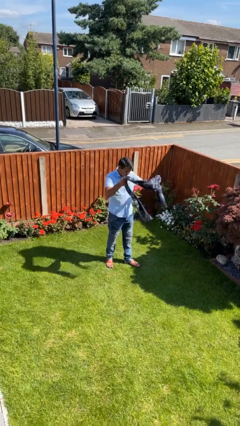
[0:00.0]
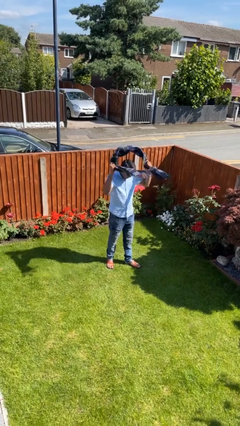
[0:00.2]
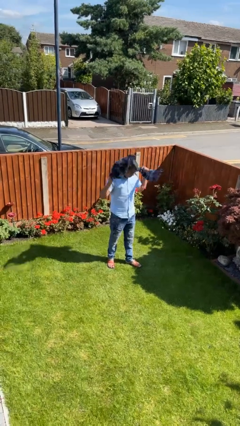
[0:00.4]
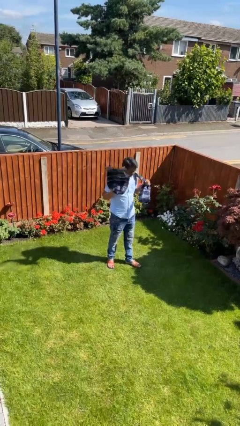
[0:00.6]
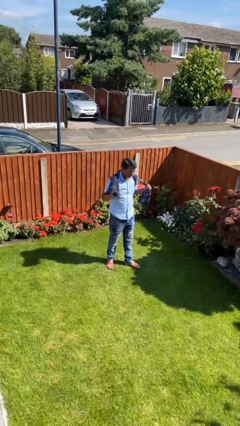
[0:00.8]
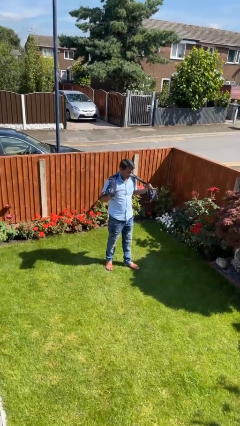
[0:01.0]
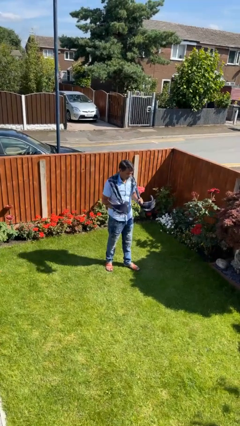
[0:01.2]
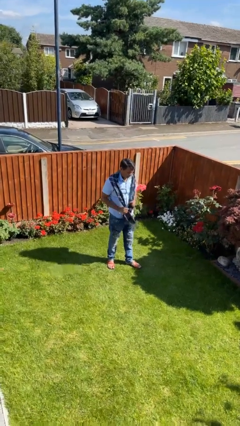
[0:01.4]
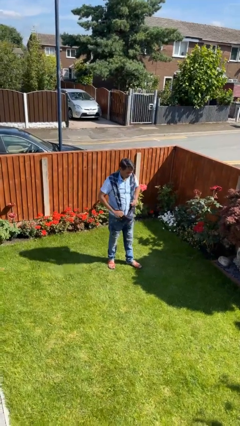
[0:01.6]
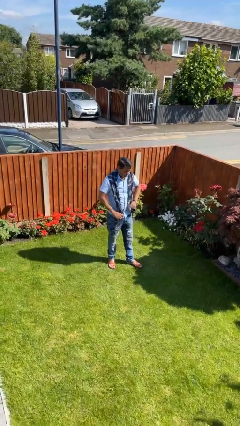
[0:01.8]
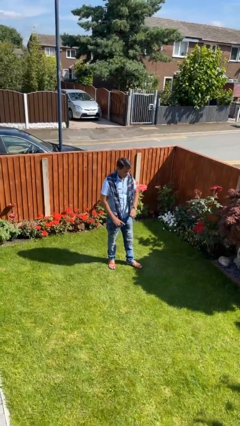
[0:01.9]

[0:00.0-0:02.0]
person puts on scarf

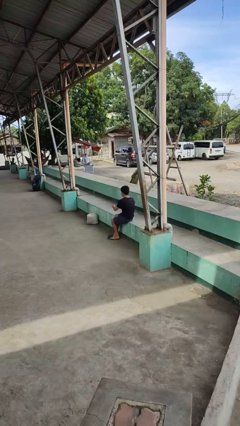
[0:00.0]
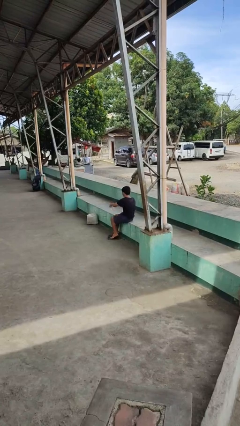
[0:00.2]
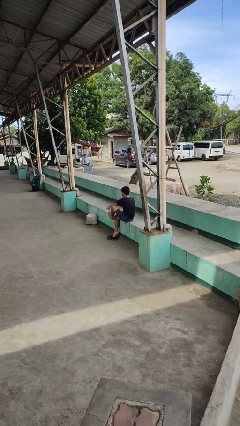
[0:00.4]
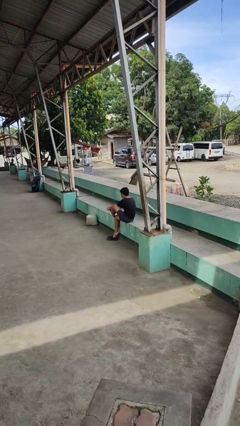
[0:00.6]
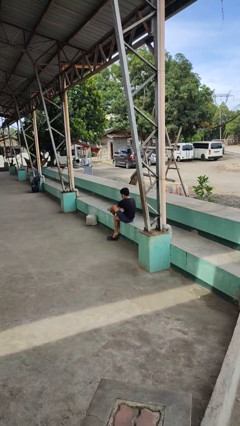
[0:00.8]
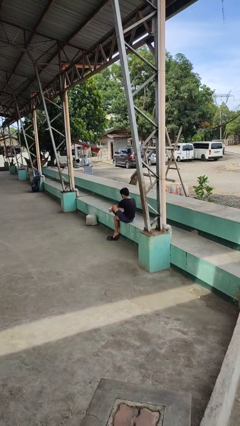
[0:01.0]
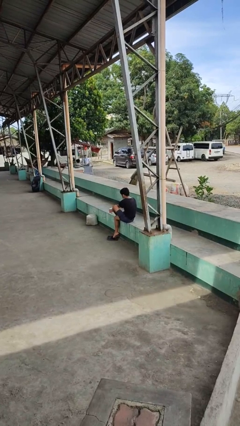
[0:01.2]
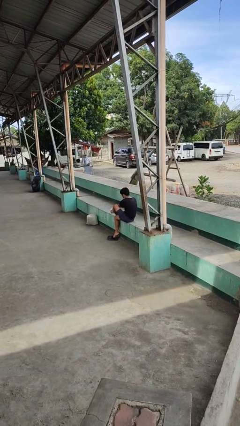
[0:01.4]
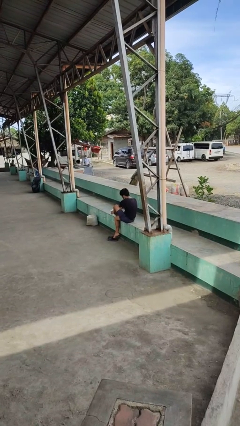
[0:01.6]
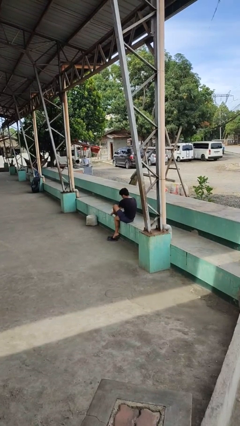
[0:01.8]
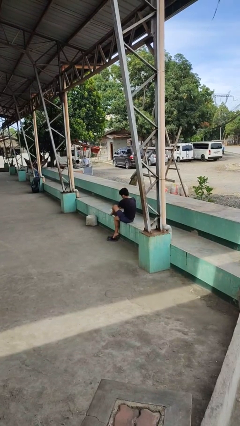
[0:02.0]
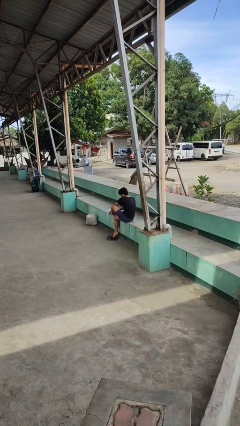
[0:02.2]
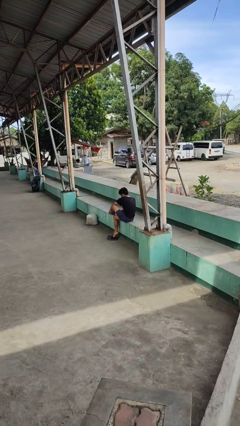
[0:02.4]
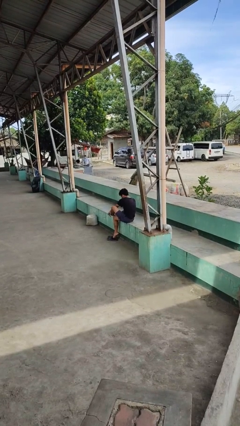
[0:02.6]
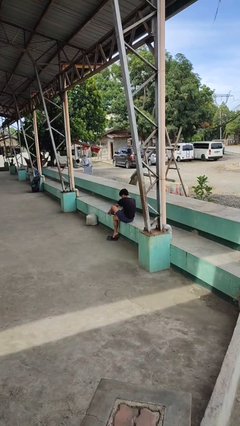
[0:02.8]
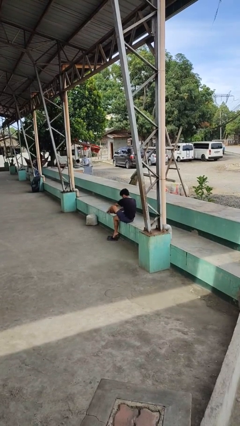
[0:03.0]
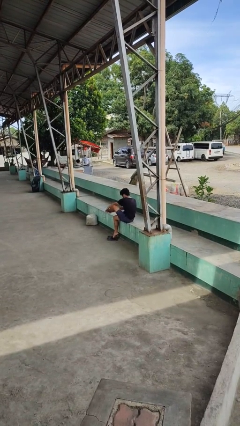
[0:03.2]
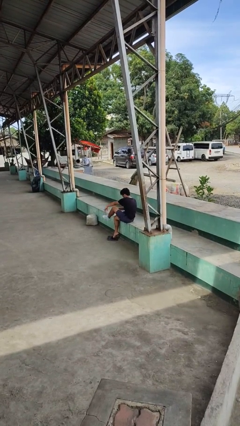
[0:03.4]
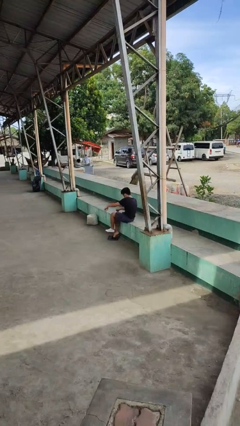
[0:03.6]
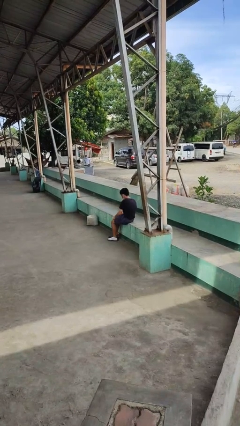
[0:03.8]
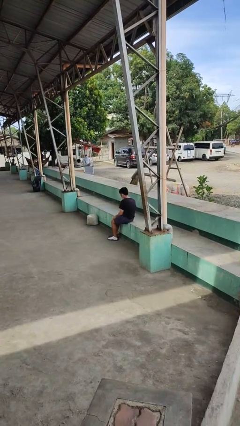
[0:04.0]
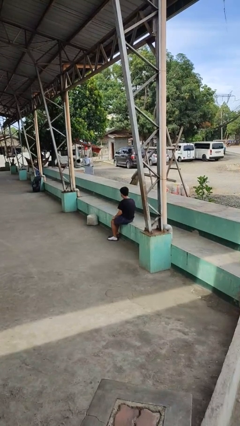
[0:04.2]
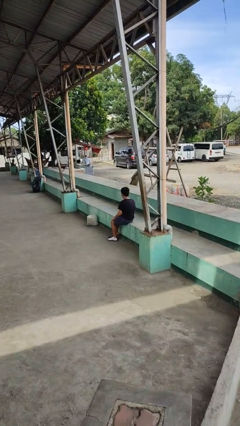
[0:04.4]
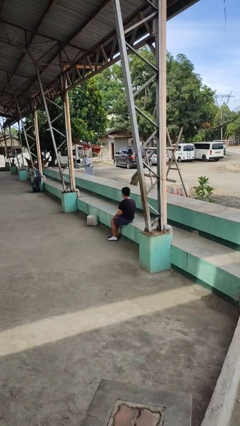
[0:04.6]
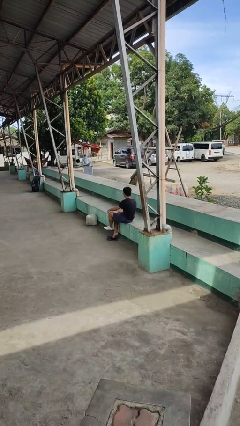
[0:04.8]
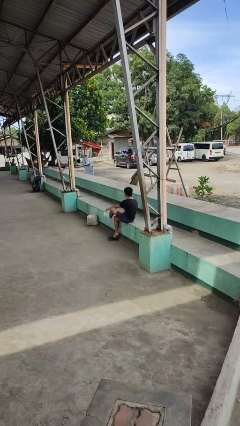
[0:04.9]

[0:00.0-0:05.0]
person puts on socks

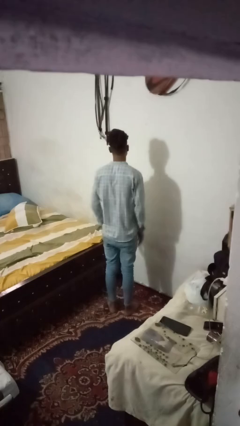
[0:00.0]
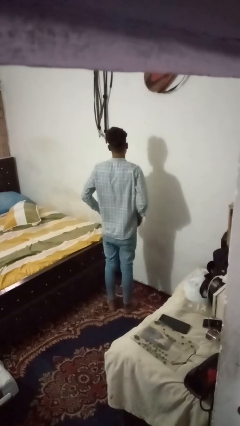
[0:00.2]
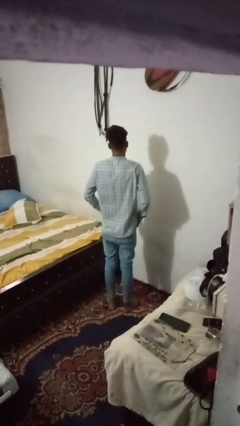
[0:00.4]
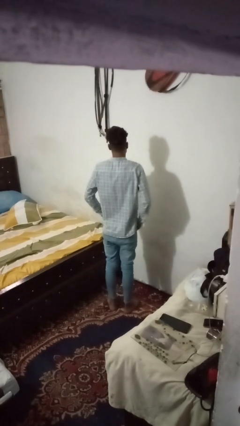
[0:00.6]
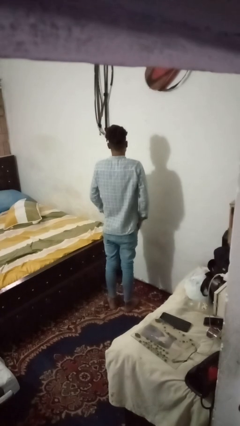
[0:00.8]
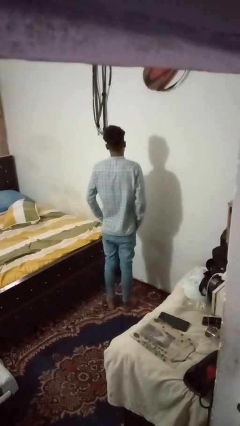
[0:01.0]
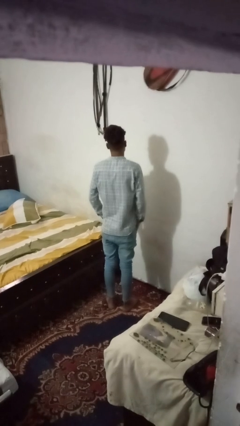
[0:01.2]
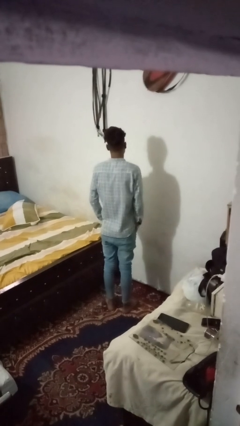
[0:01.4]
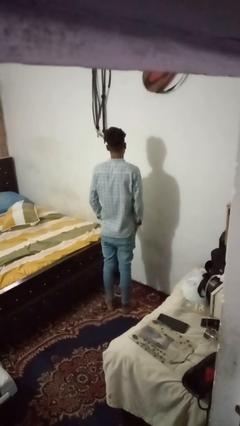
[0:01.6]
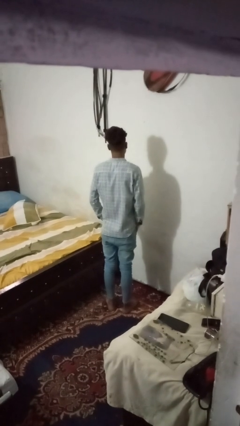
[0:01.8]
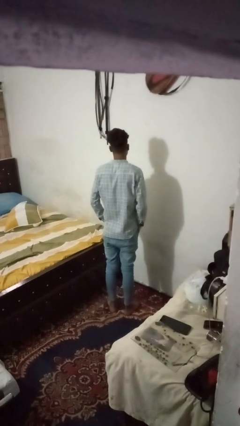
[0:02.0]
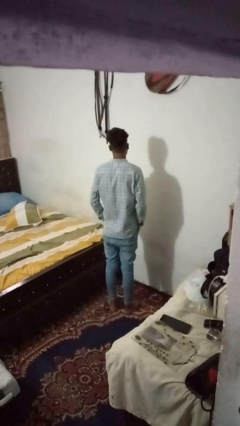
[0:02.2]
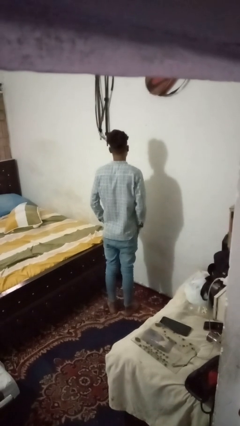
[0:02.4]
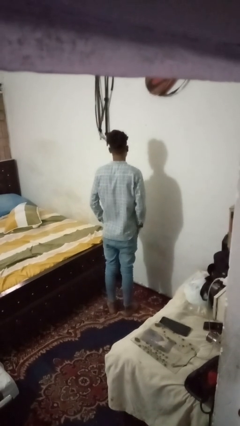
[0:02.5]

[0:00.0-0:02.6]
person puts hands in back pockets

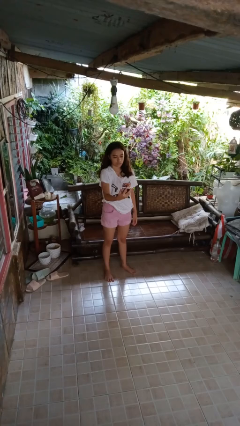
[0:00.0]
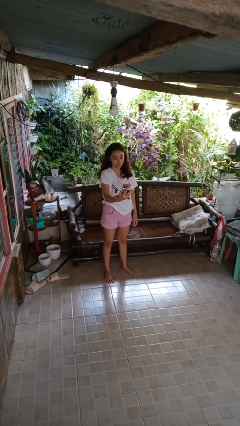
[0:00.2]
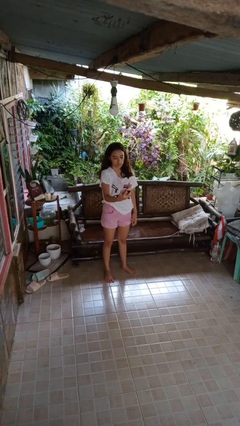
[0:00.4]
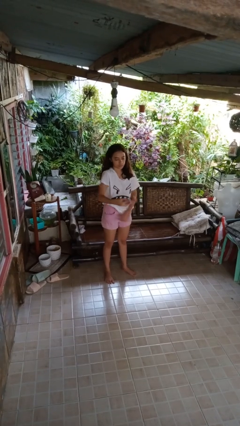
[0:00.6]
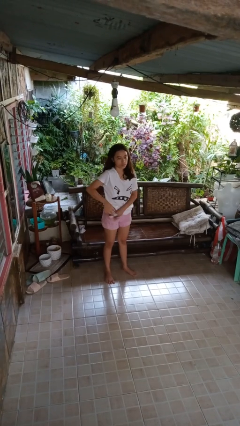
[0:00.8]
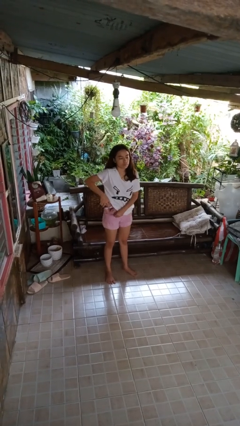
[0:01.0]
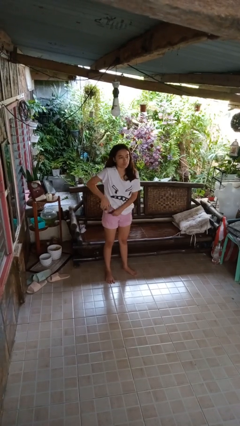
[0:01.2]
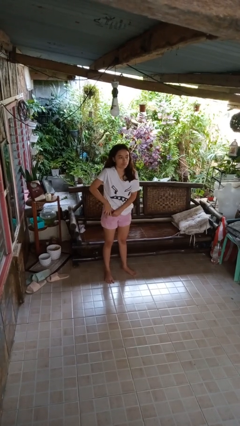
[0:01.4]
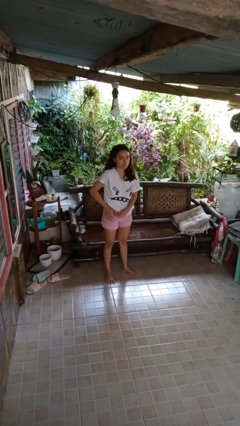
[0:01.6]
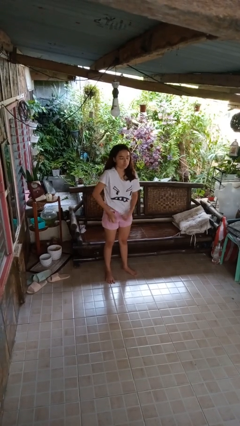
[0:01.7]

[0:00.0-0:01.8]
person puts phone into pocket

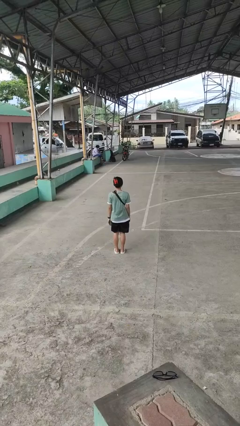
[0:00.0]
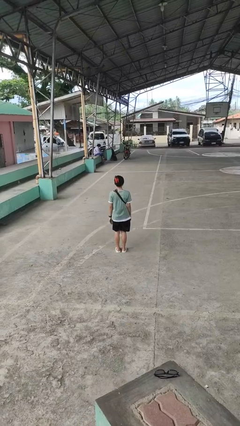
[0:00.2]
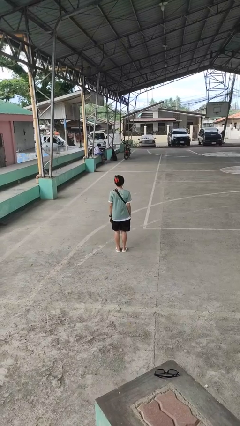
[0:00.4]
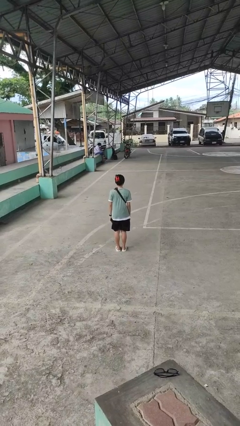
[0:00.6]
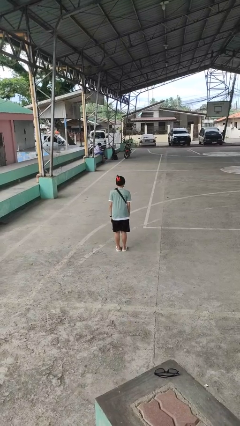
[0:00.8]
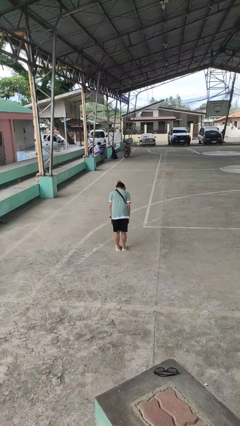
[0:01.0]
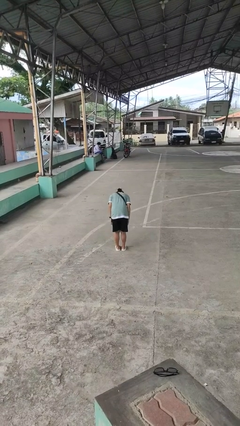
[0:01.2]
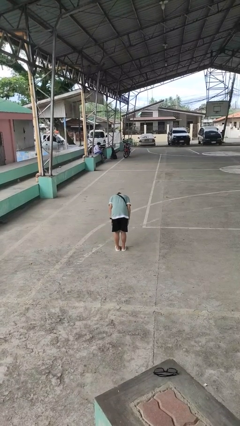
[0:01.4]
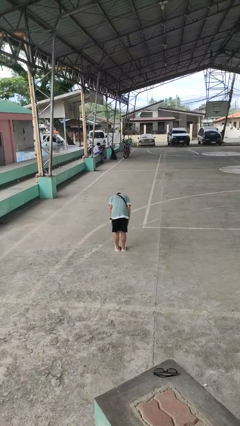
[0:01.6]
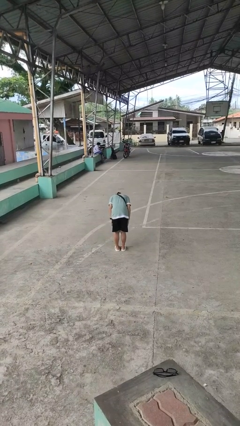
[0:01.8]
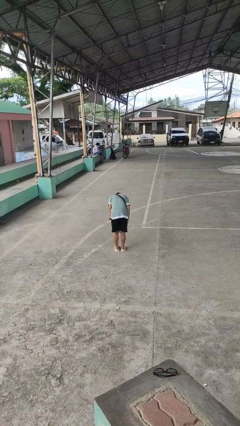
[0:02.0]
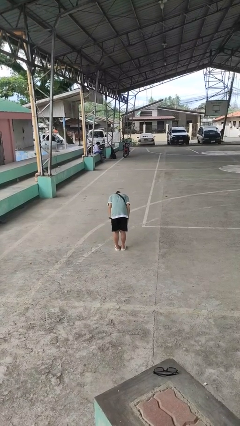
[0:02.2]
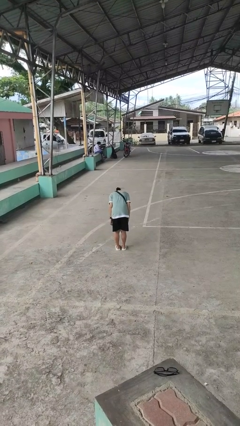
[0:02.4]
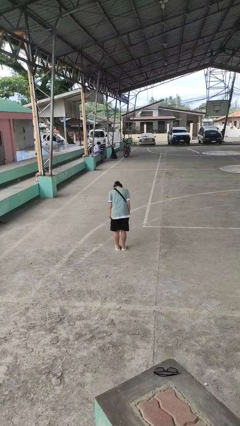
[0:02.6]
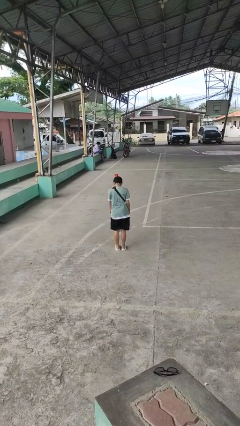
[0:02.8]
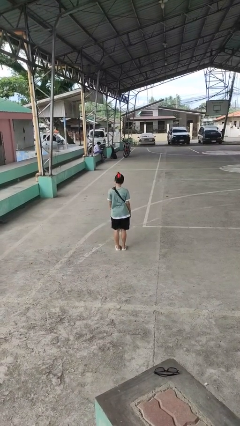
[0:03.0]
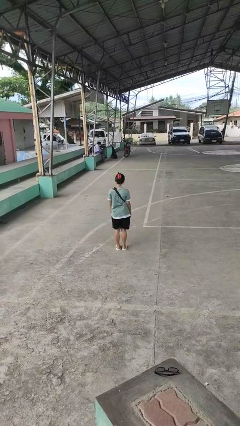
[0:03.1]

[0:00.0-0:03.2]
person bows

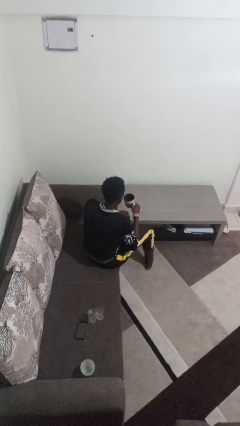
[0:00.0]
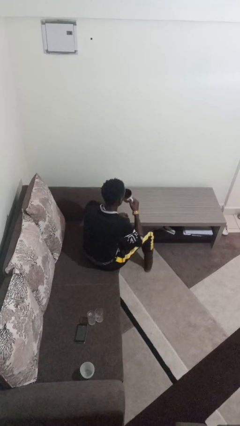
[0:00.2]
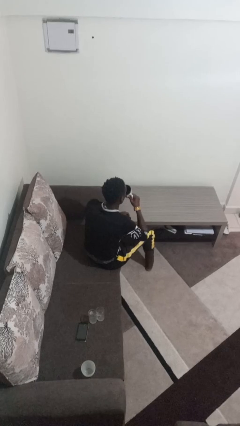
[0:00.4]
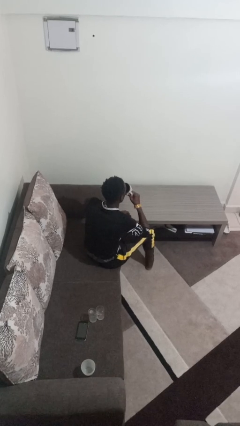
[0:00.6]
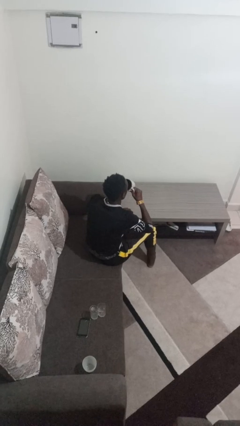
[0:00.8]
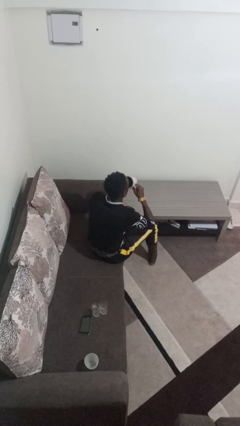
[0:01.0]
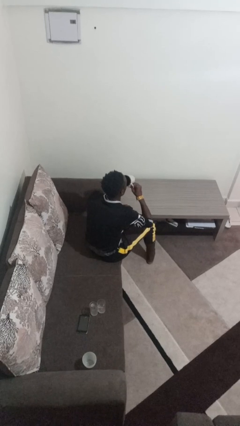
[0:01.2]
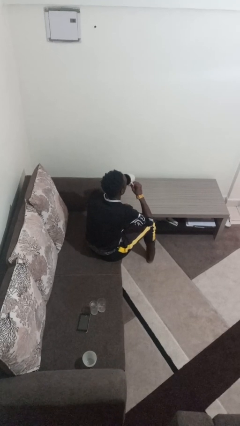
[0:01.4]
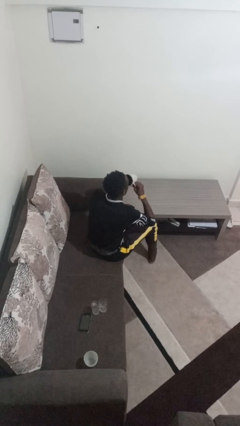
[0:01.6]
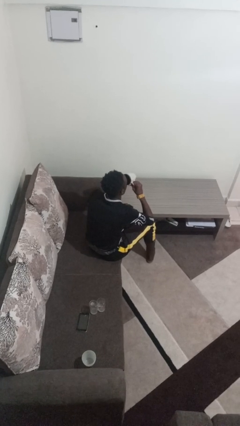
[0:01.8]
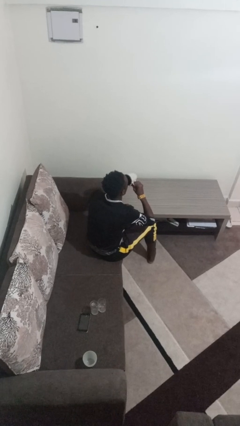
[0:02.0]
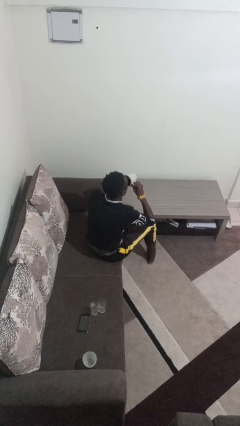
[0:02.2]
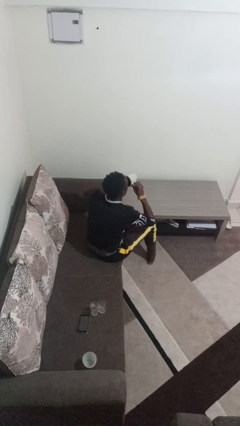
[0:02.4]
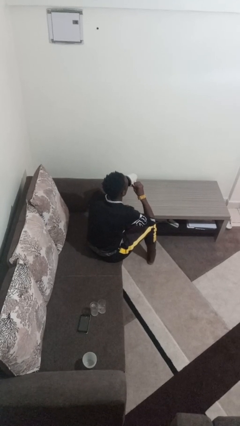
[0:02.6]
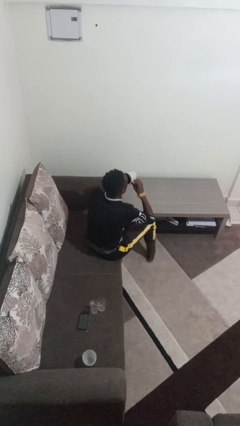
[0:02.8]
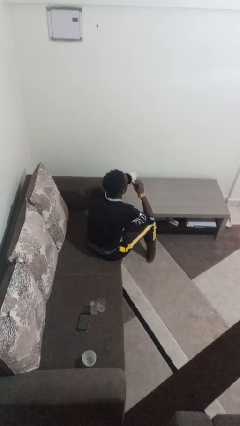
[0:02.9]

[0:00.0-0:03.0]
person drinks from mug
